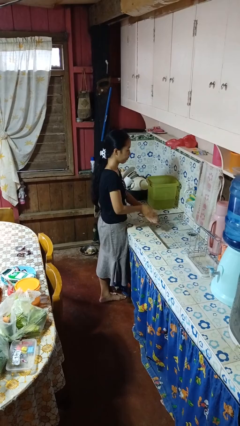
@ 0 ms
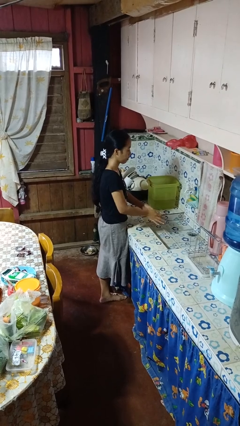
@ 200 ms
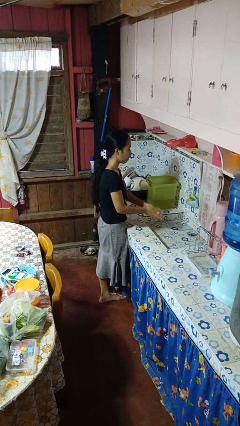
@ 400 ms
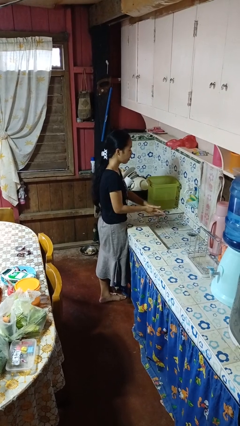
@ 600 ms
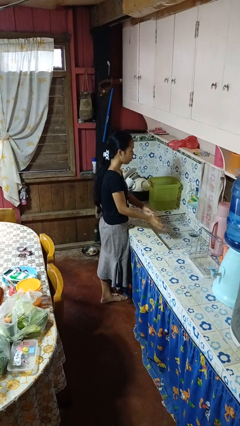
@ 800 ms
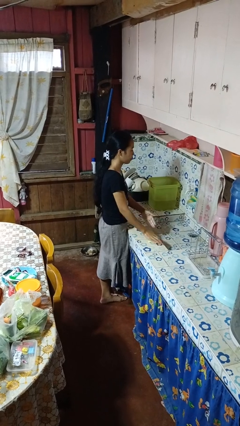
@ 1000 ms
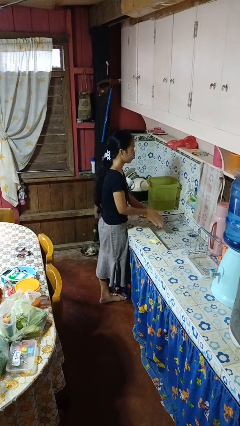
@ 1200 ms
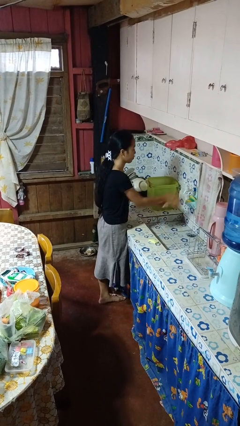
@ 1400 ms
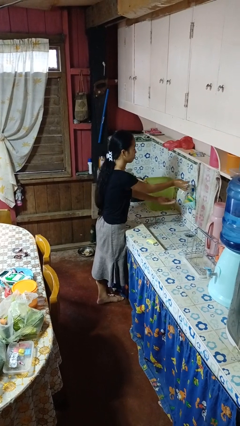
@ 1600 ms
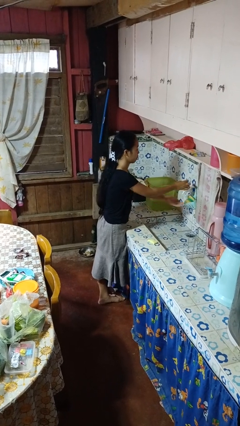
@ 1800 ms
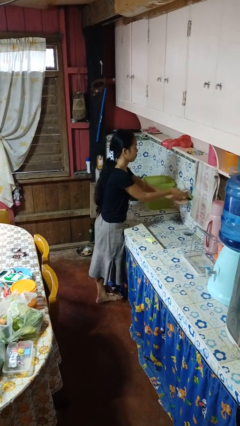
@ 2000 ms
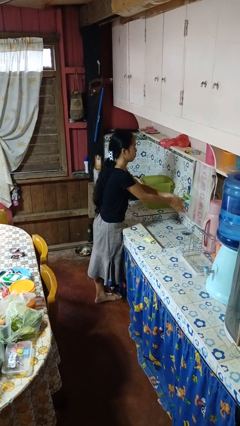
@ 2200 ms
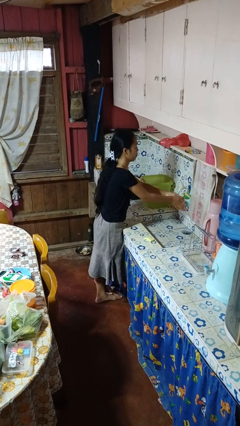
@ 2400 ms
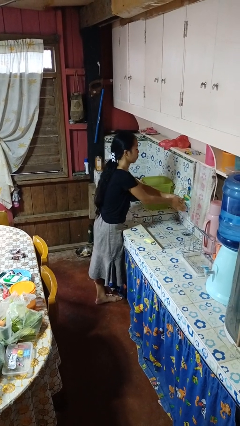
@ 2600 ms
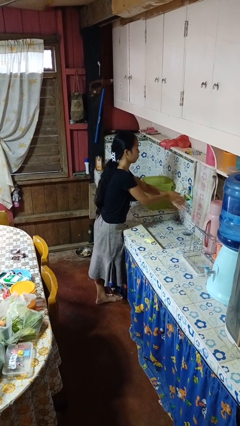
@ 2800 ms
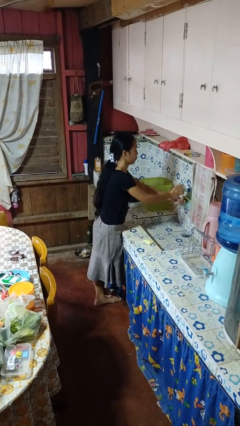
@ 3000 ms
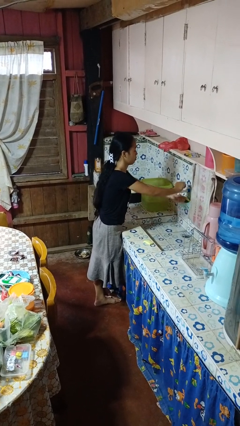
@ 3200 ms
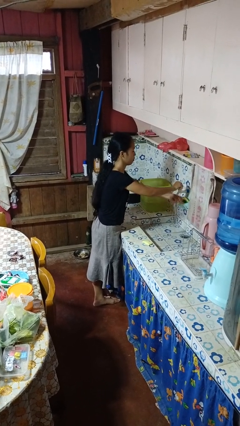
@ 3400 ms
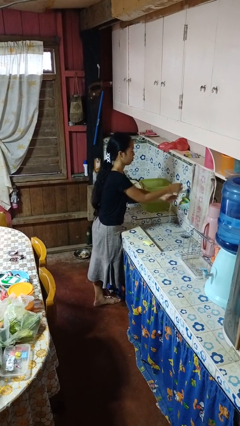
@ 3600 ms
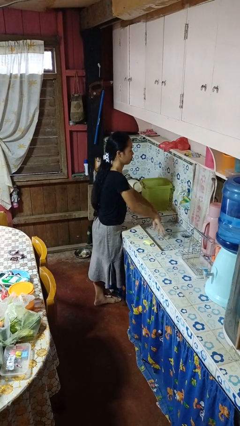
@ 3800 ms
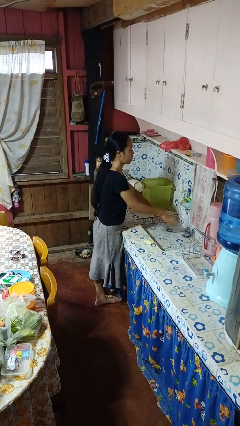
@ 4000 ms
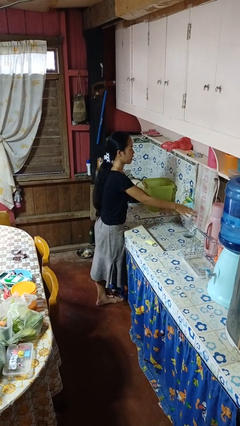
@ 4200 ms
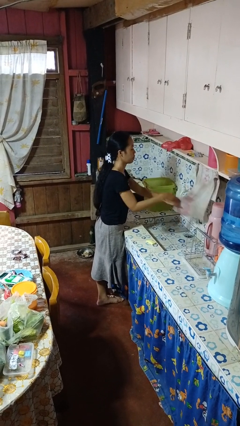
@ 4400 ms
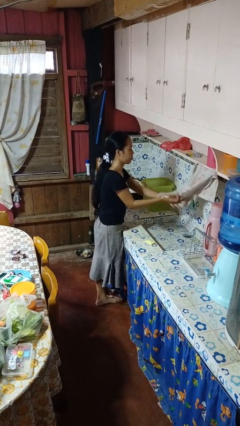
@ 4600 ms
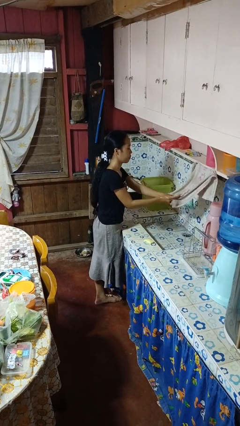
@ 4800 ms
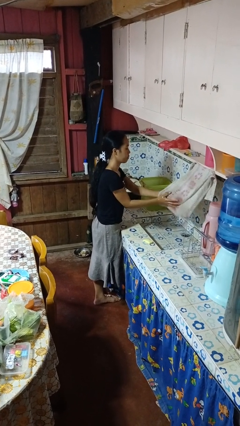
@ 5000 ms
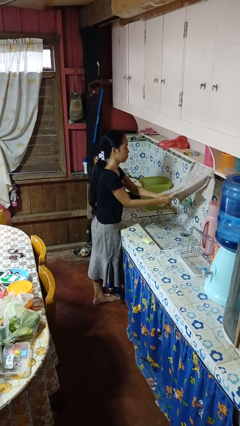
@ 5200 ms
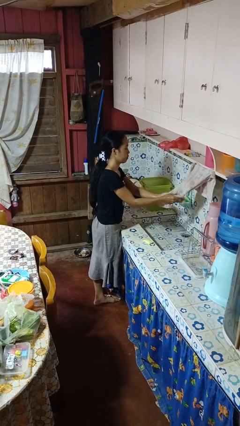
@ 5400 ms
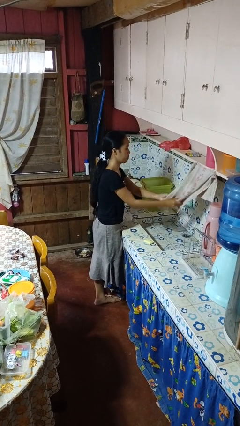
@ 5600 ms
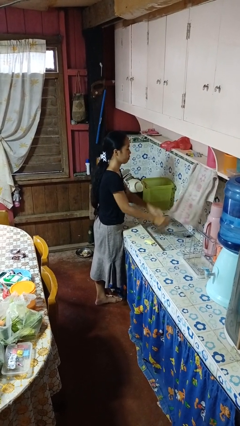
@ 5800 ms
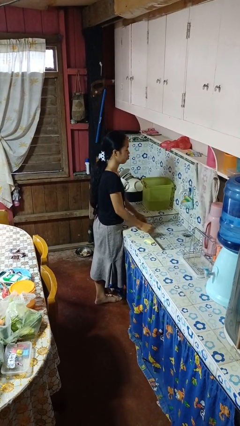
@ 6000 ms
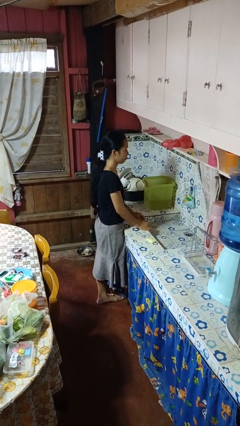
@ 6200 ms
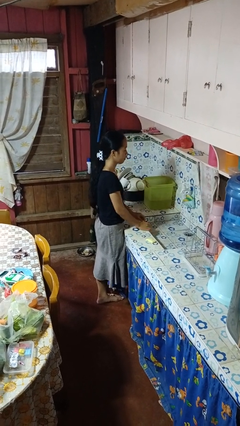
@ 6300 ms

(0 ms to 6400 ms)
person washes hands

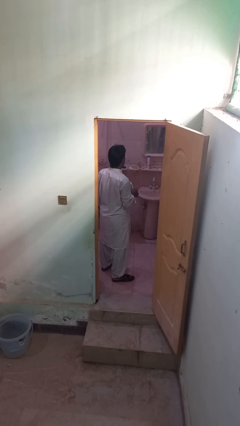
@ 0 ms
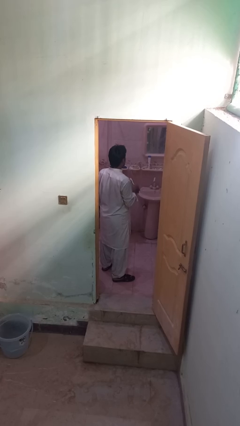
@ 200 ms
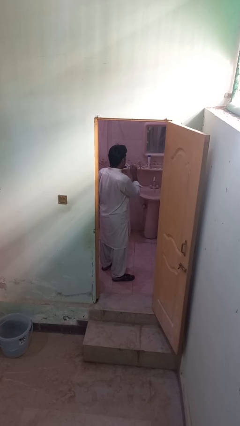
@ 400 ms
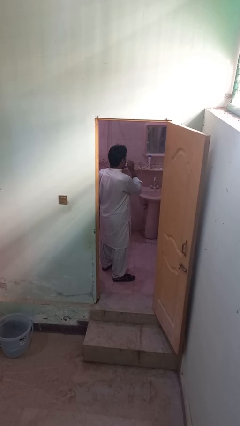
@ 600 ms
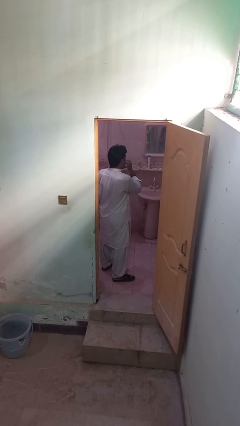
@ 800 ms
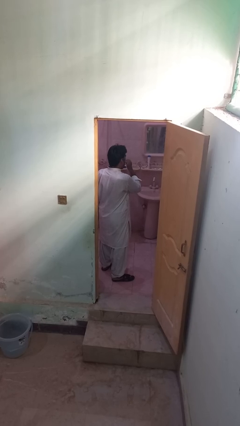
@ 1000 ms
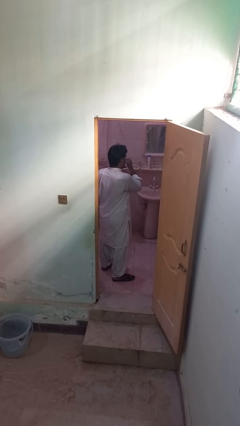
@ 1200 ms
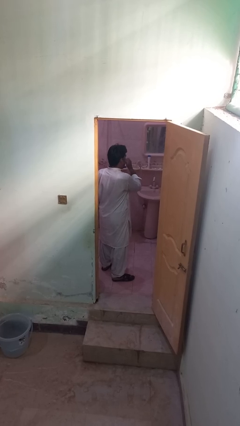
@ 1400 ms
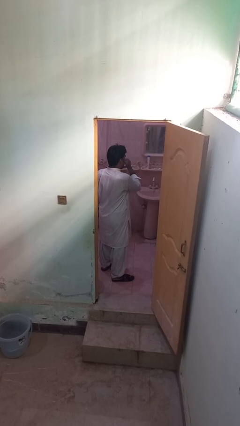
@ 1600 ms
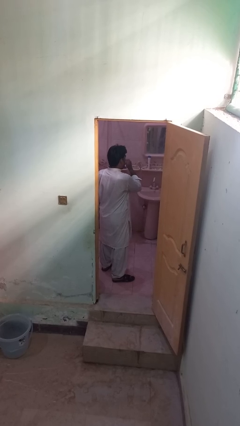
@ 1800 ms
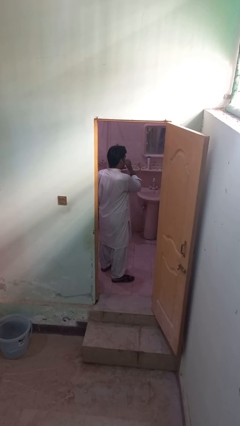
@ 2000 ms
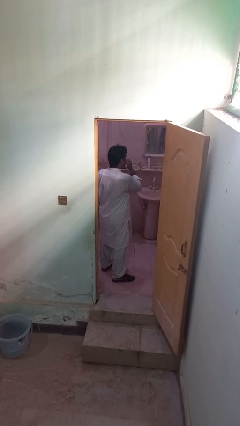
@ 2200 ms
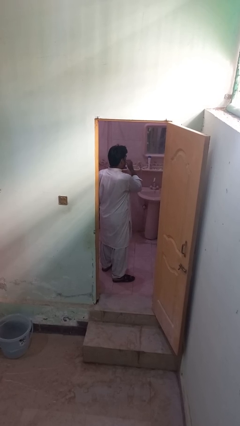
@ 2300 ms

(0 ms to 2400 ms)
person brushes teeth

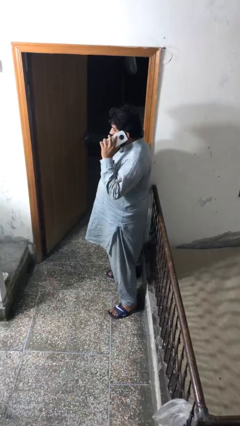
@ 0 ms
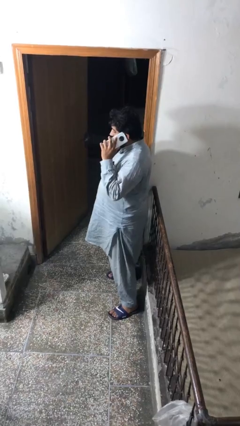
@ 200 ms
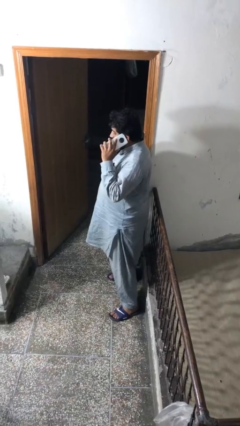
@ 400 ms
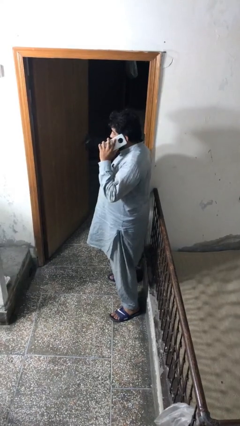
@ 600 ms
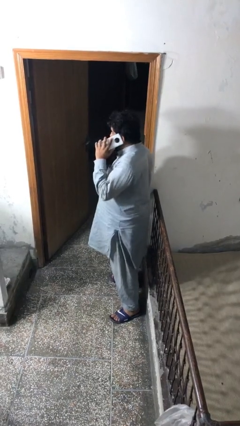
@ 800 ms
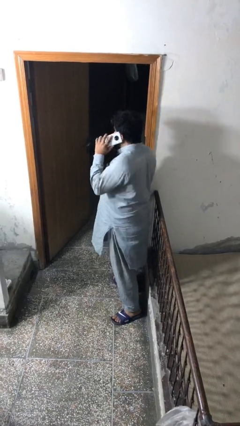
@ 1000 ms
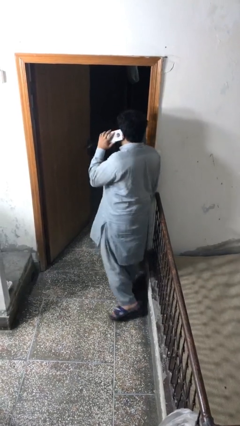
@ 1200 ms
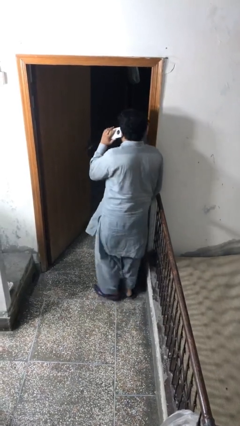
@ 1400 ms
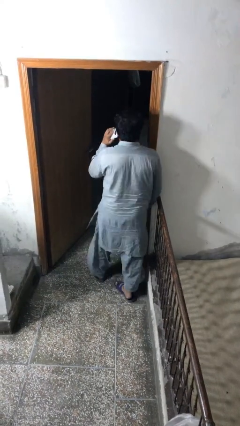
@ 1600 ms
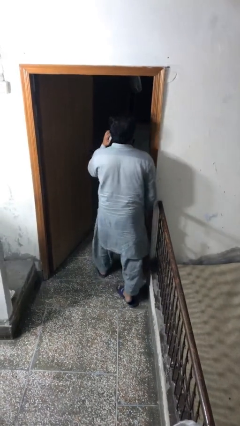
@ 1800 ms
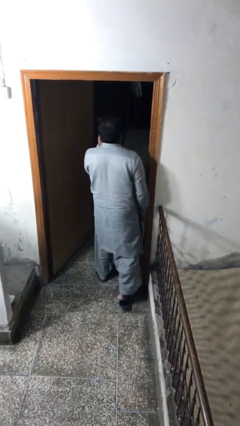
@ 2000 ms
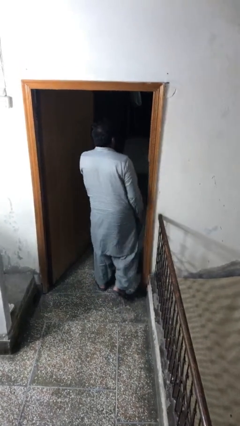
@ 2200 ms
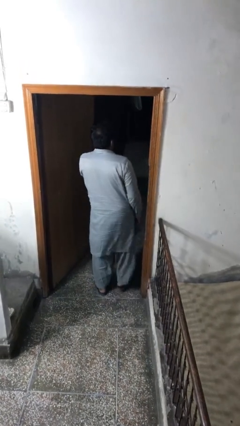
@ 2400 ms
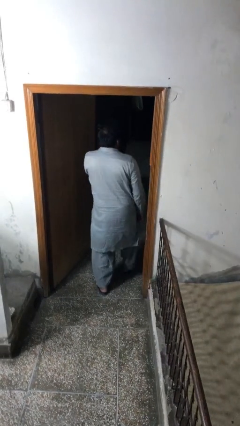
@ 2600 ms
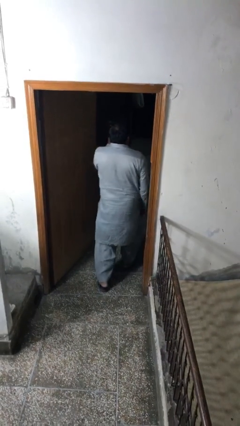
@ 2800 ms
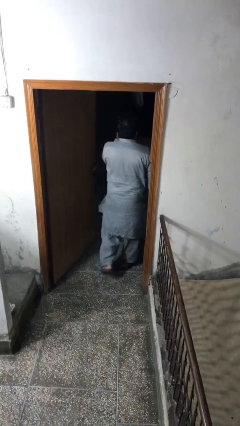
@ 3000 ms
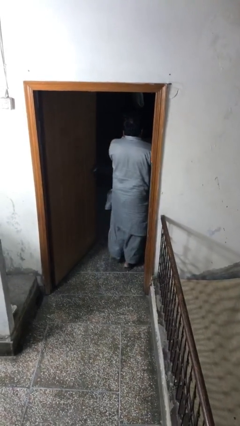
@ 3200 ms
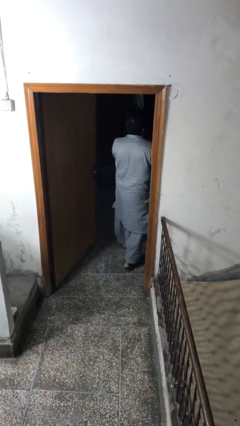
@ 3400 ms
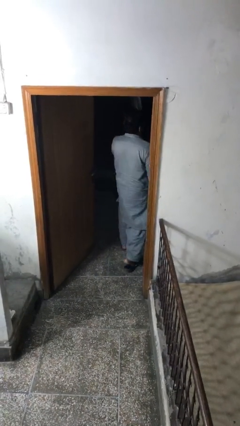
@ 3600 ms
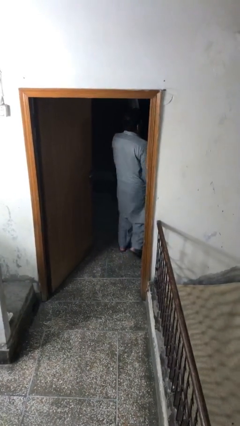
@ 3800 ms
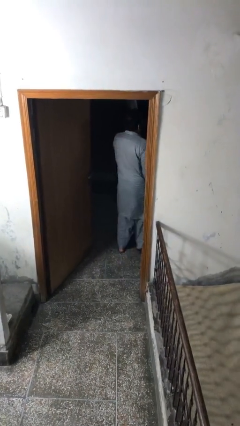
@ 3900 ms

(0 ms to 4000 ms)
person exits scene through structure

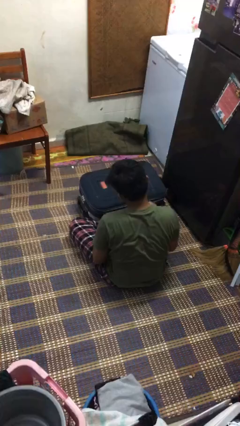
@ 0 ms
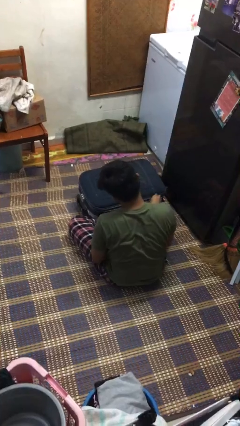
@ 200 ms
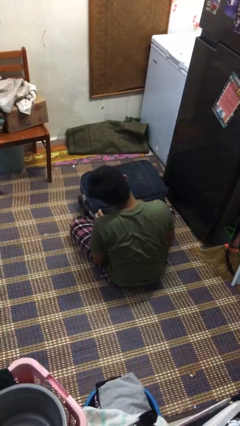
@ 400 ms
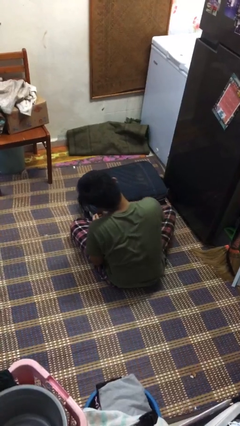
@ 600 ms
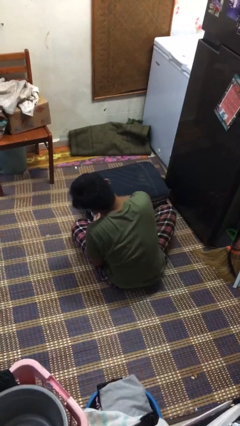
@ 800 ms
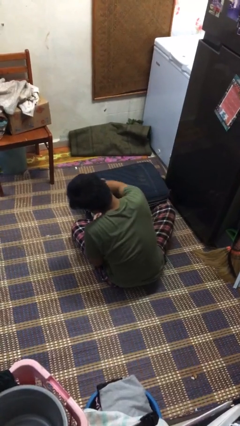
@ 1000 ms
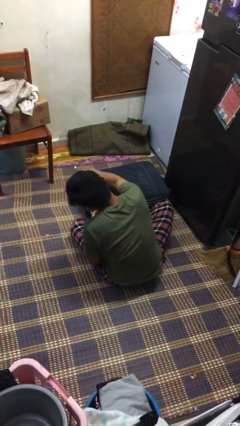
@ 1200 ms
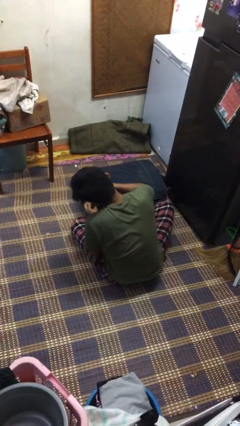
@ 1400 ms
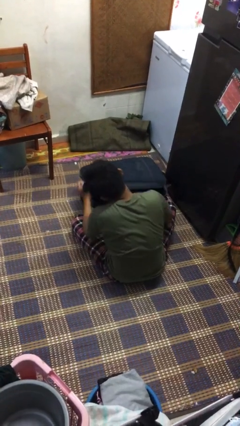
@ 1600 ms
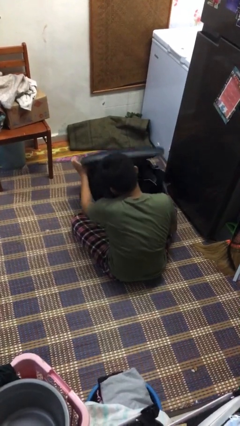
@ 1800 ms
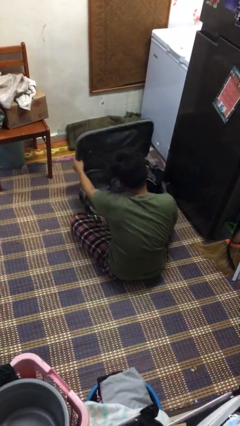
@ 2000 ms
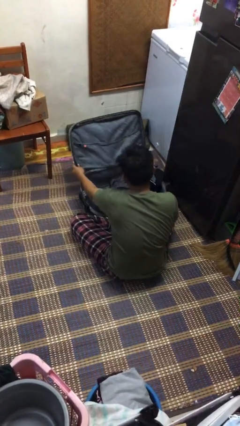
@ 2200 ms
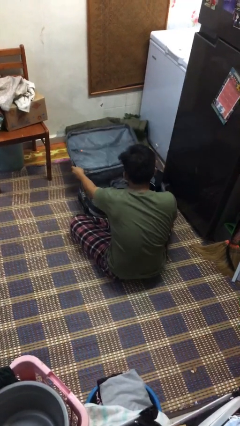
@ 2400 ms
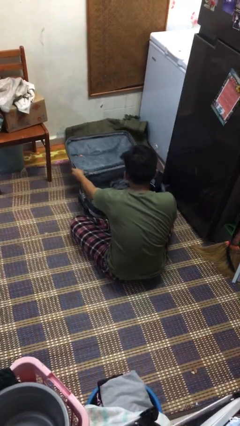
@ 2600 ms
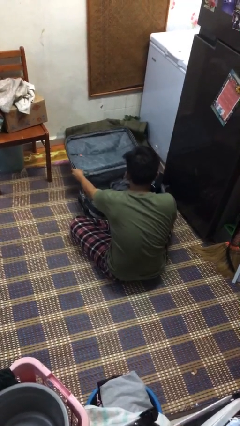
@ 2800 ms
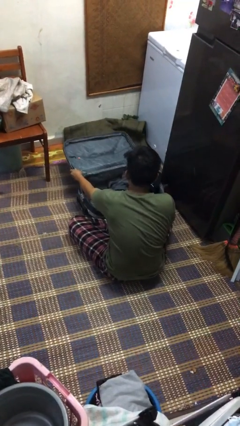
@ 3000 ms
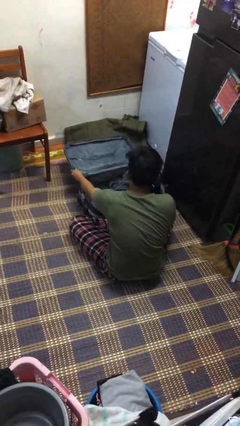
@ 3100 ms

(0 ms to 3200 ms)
person opens suitcase

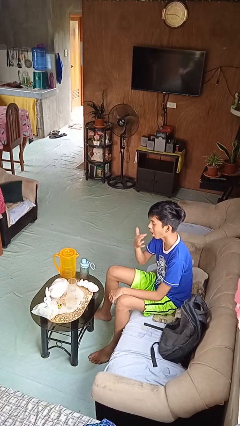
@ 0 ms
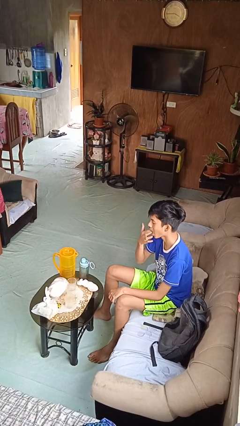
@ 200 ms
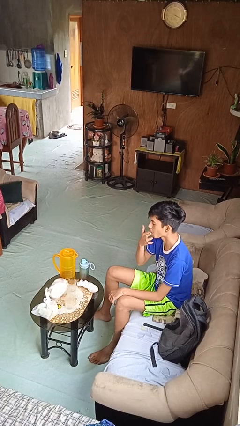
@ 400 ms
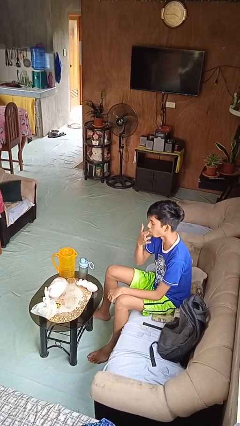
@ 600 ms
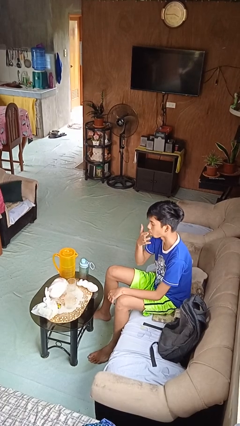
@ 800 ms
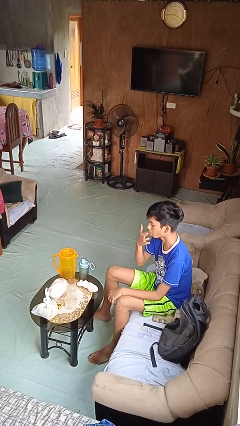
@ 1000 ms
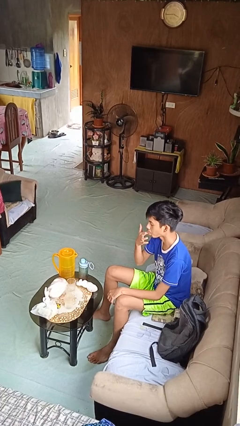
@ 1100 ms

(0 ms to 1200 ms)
person licks fingers

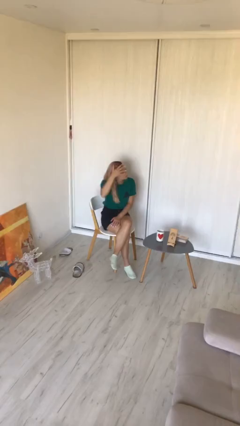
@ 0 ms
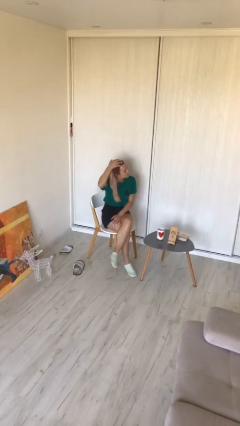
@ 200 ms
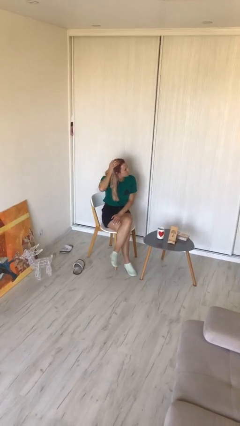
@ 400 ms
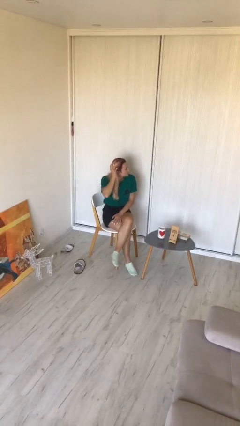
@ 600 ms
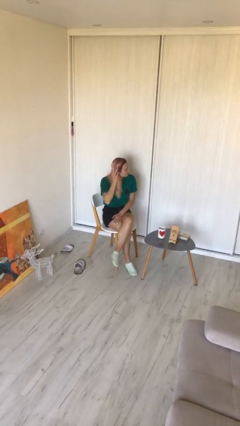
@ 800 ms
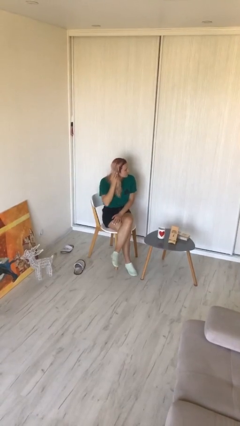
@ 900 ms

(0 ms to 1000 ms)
person strokes hair
